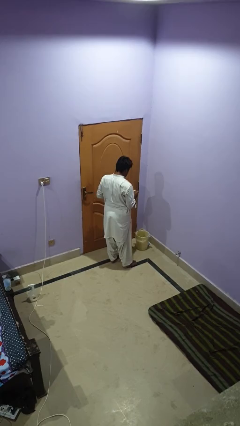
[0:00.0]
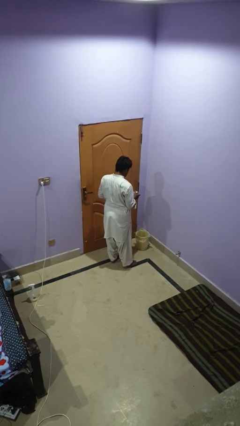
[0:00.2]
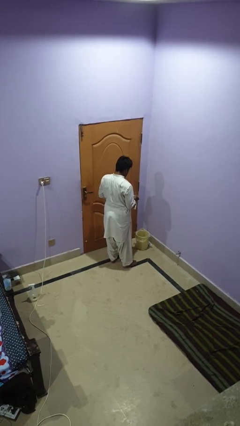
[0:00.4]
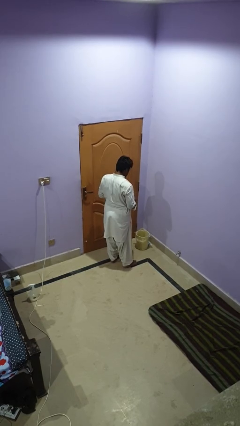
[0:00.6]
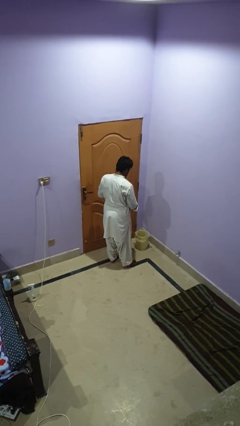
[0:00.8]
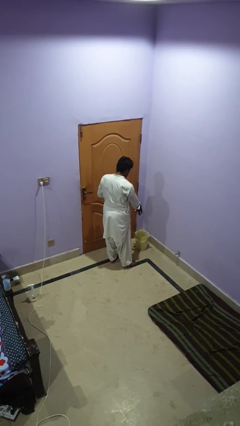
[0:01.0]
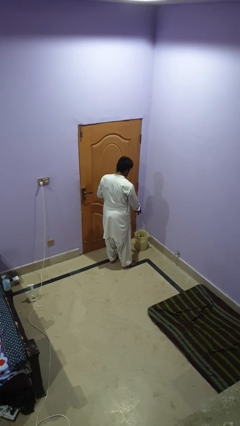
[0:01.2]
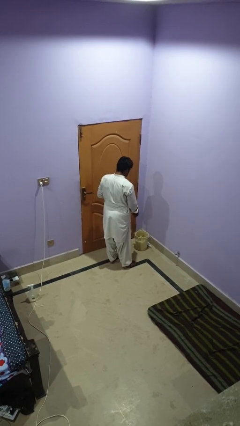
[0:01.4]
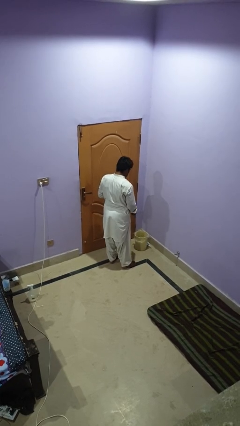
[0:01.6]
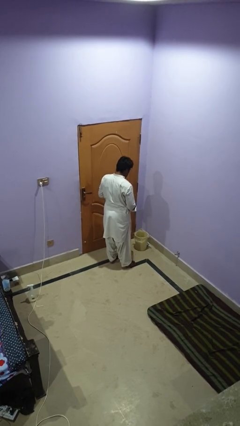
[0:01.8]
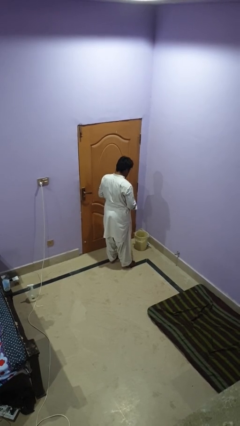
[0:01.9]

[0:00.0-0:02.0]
person discards trash

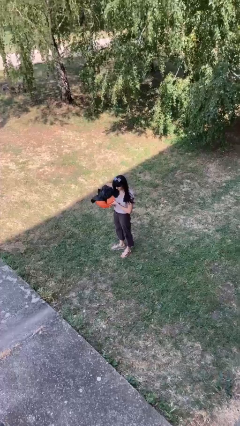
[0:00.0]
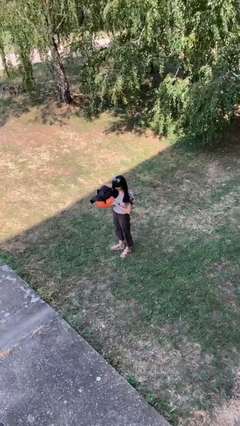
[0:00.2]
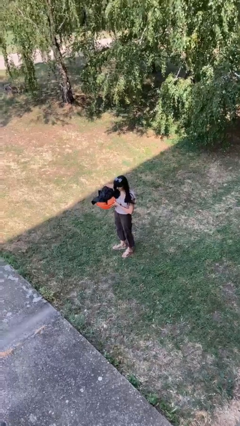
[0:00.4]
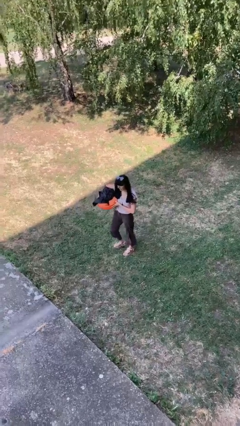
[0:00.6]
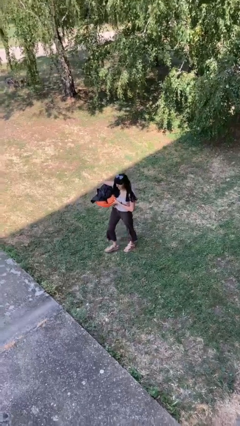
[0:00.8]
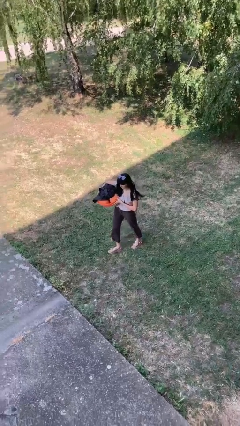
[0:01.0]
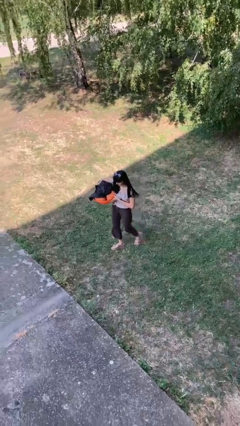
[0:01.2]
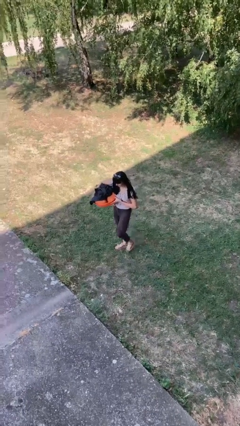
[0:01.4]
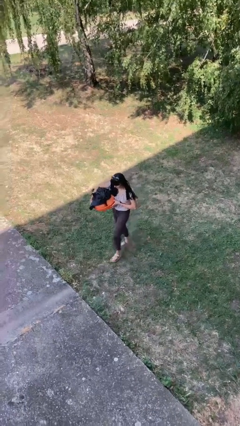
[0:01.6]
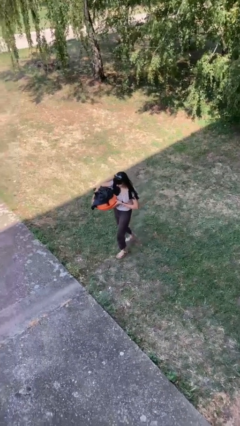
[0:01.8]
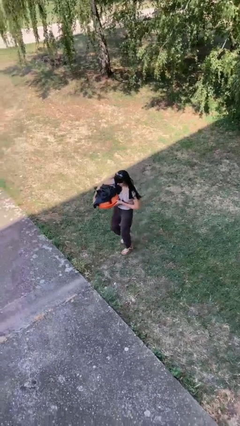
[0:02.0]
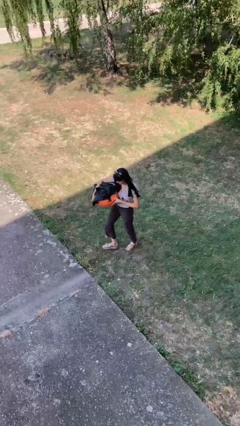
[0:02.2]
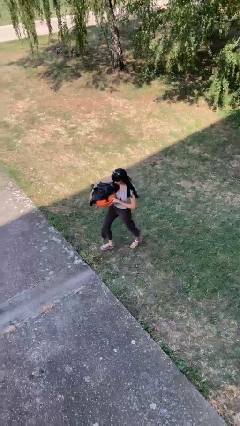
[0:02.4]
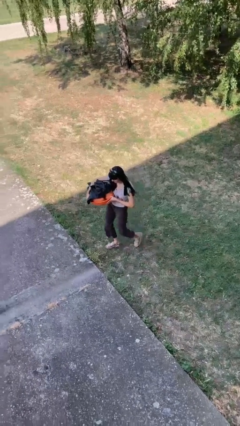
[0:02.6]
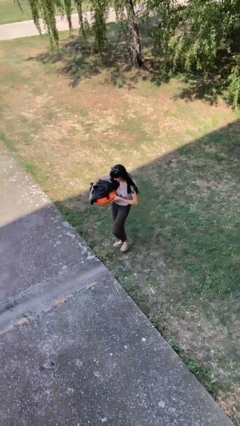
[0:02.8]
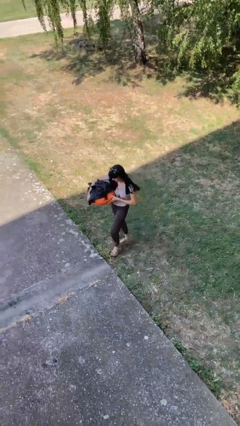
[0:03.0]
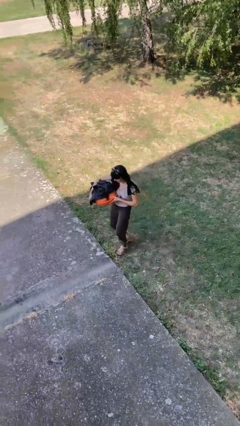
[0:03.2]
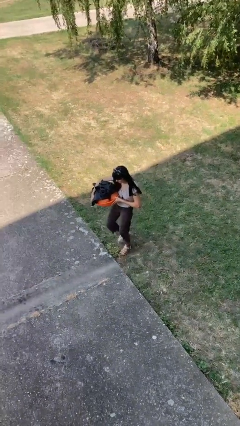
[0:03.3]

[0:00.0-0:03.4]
person carries laundry basket

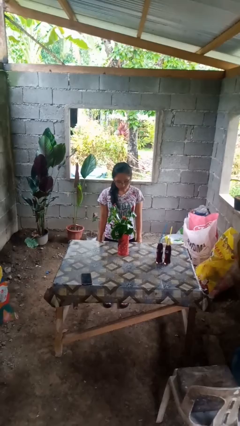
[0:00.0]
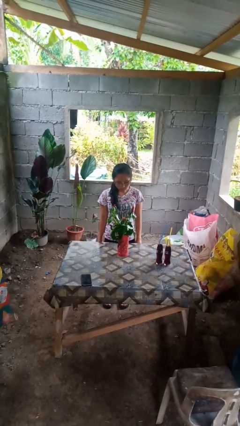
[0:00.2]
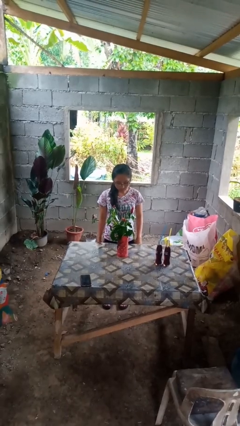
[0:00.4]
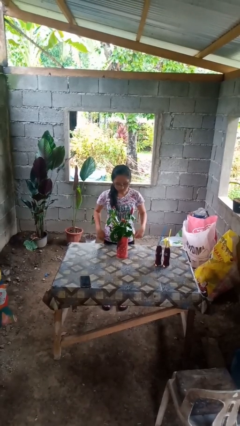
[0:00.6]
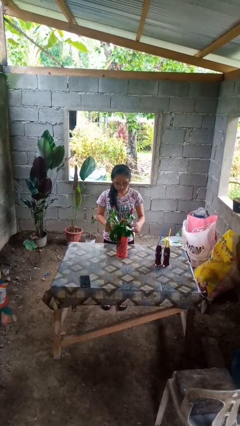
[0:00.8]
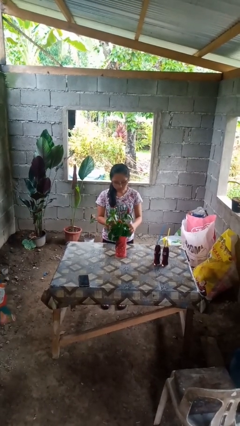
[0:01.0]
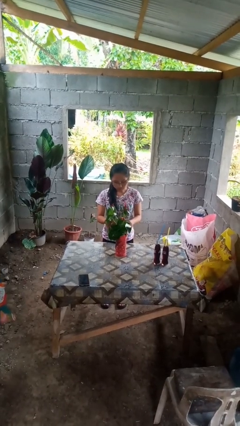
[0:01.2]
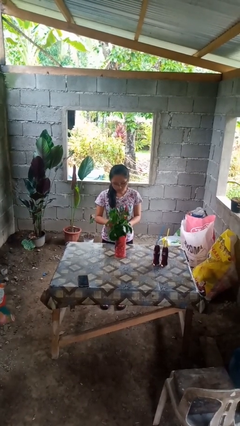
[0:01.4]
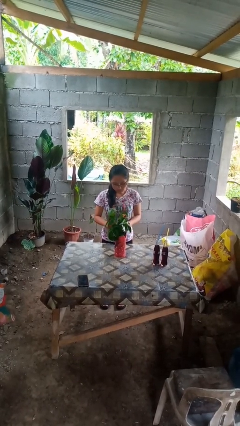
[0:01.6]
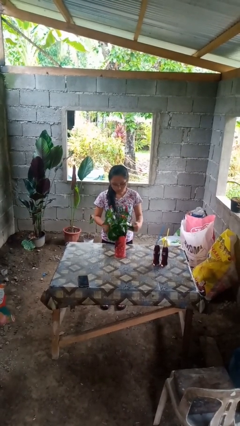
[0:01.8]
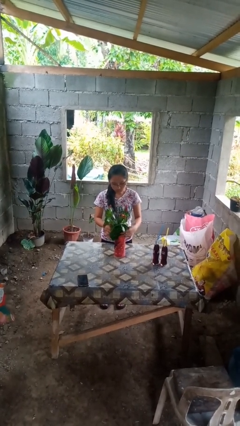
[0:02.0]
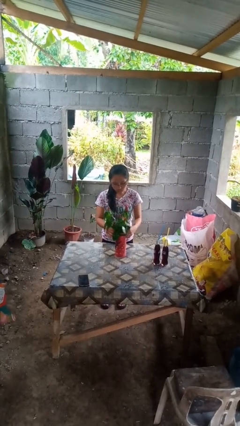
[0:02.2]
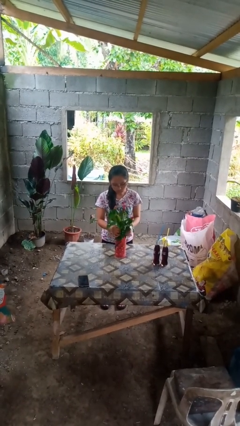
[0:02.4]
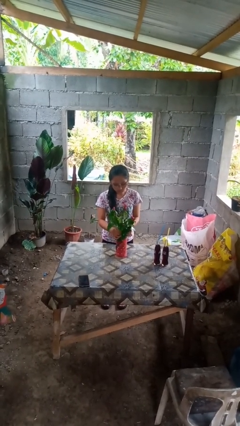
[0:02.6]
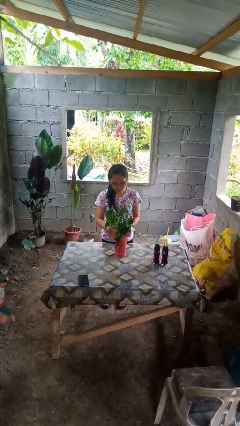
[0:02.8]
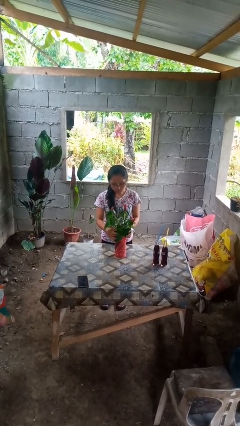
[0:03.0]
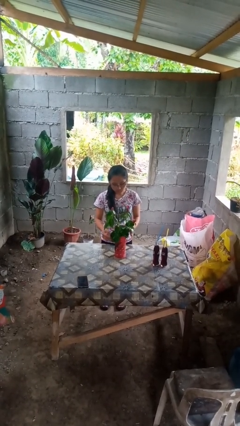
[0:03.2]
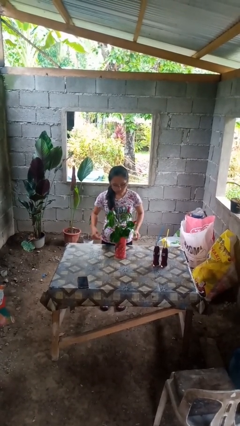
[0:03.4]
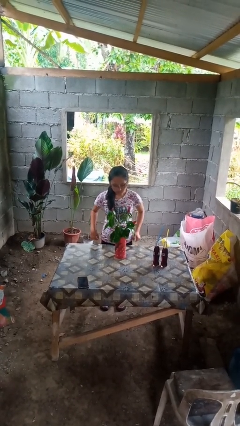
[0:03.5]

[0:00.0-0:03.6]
person arranges flowers in vase

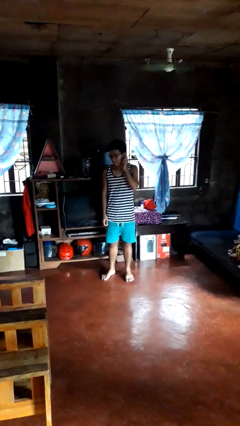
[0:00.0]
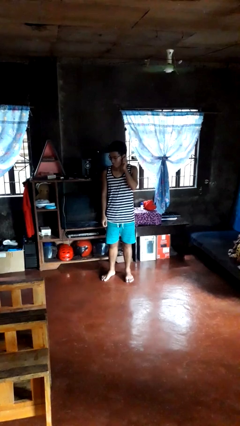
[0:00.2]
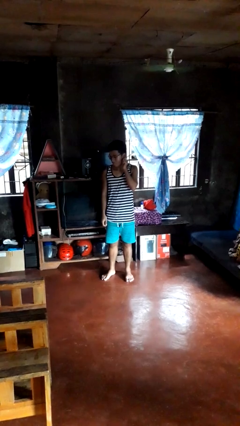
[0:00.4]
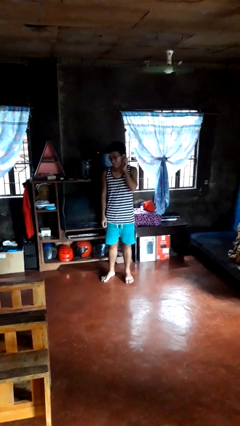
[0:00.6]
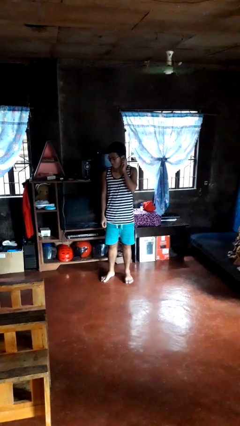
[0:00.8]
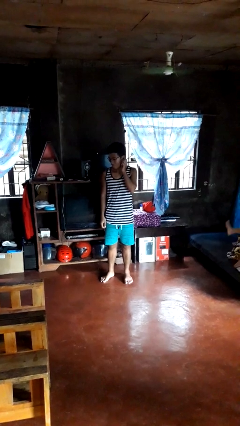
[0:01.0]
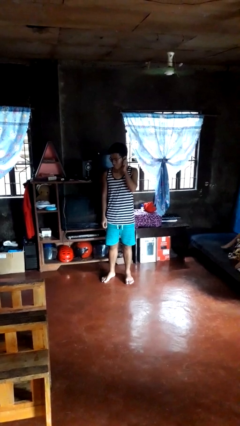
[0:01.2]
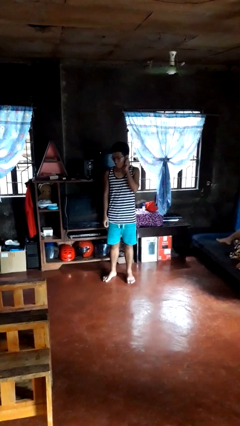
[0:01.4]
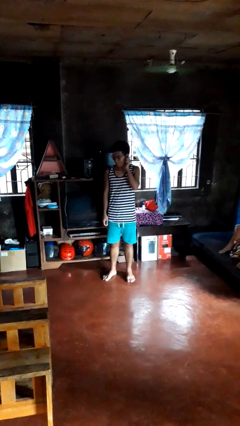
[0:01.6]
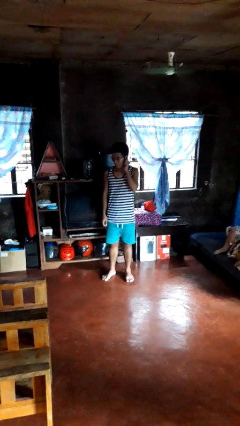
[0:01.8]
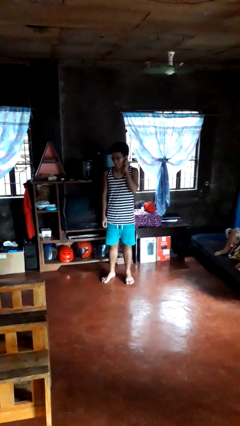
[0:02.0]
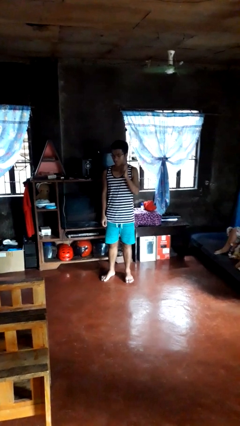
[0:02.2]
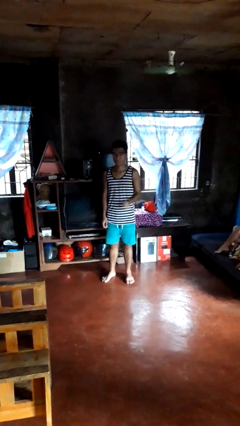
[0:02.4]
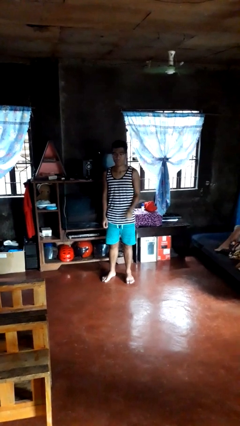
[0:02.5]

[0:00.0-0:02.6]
person touches earlobe

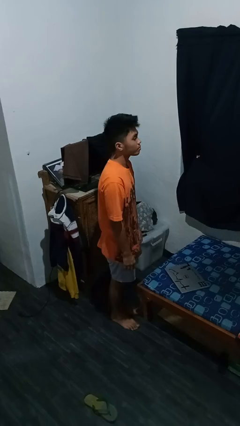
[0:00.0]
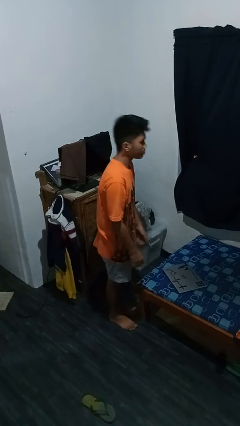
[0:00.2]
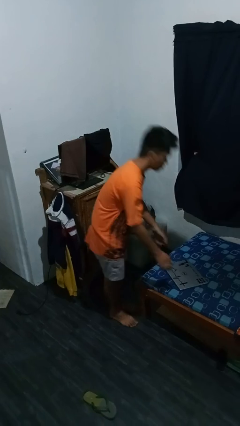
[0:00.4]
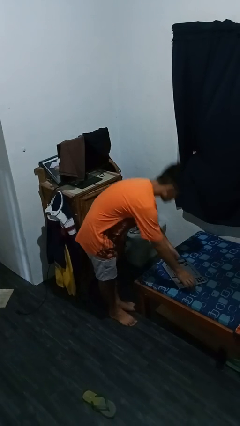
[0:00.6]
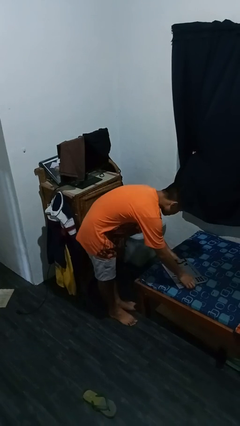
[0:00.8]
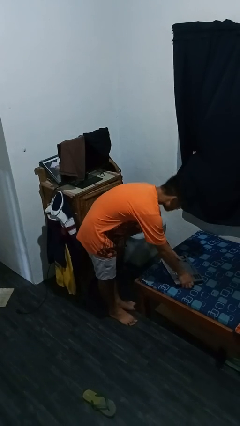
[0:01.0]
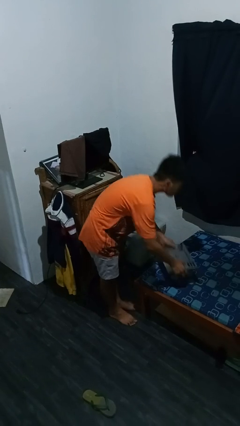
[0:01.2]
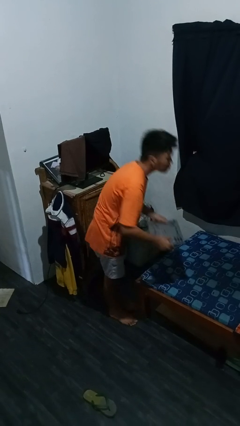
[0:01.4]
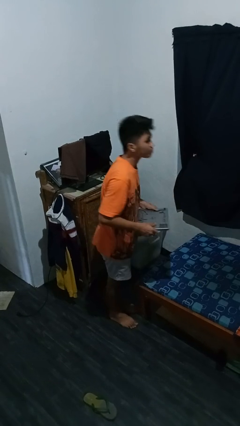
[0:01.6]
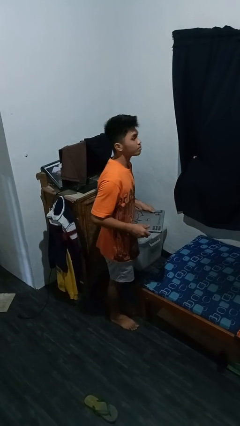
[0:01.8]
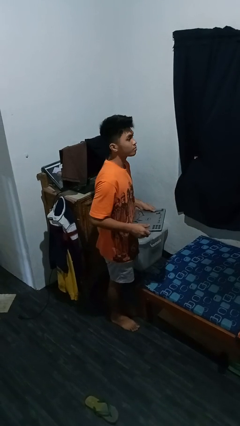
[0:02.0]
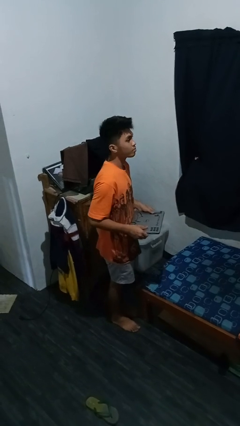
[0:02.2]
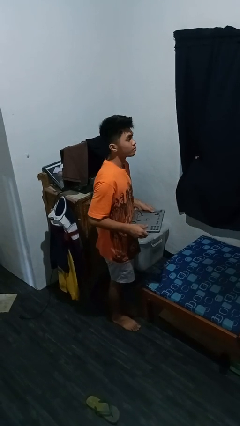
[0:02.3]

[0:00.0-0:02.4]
person picks up object from bed

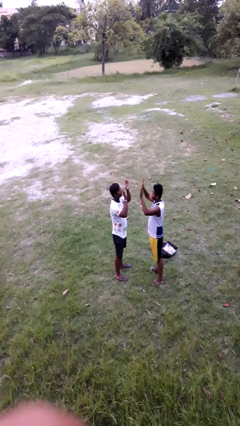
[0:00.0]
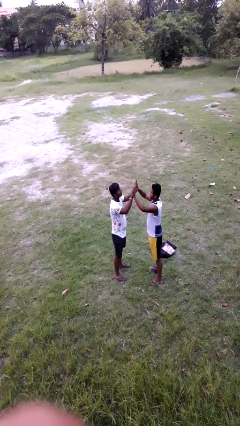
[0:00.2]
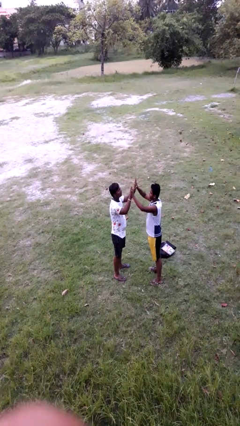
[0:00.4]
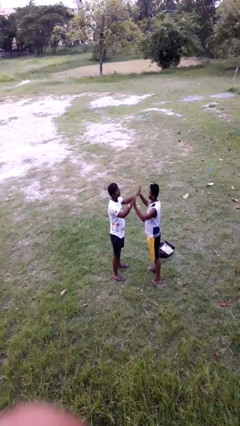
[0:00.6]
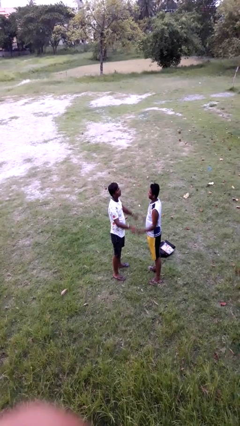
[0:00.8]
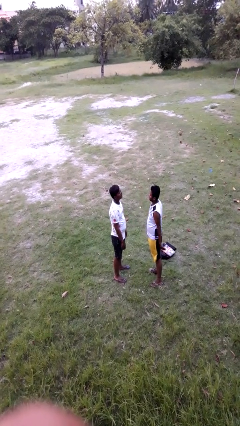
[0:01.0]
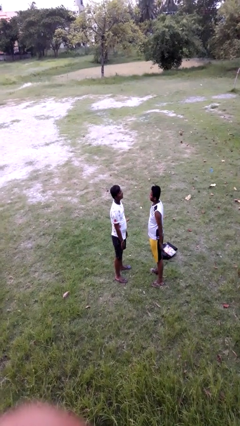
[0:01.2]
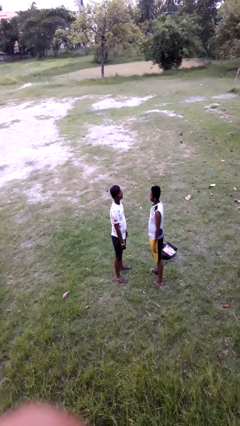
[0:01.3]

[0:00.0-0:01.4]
person highfives hand

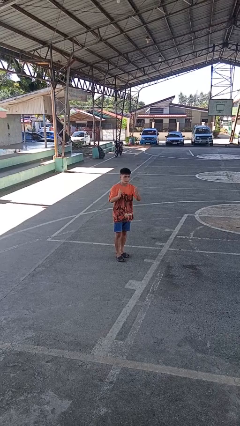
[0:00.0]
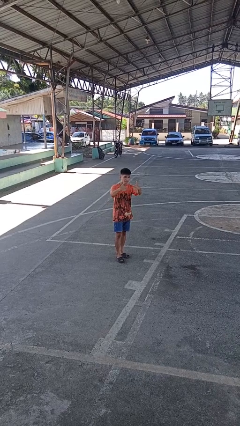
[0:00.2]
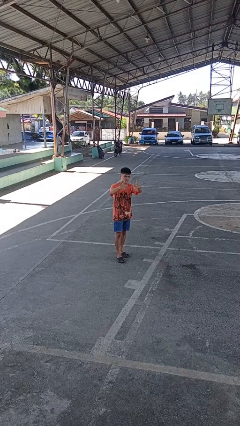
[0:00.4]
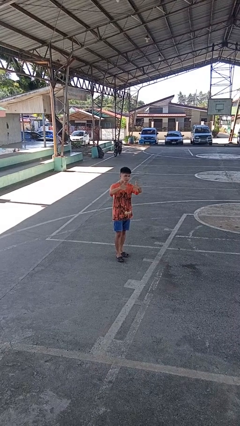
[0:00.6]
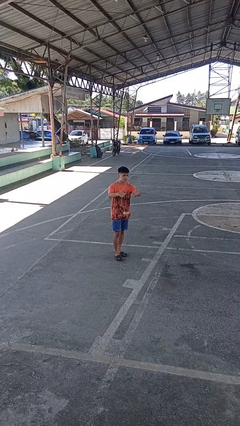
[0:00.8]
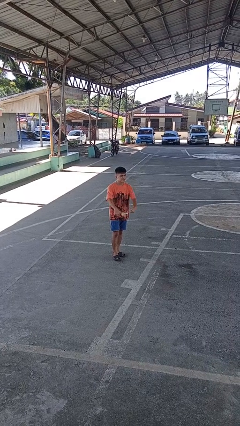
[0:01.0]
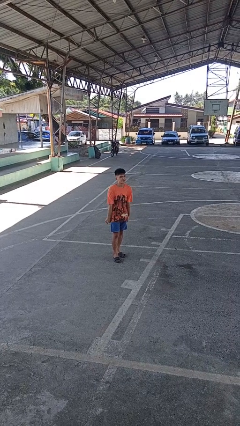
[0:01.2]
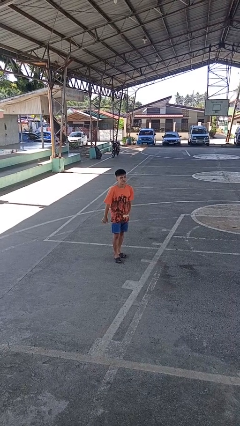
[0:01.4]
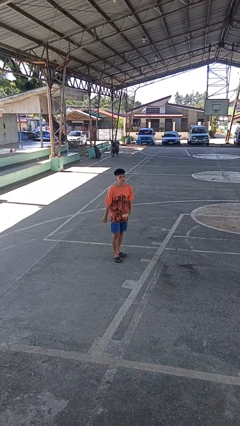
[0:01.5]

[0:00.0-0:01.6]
person gestures thumbs up
